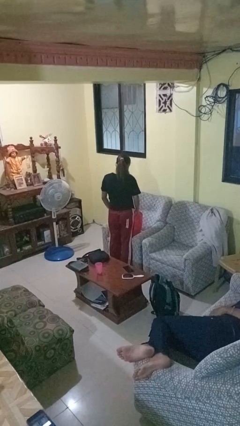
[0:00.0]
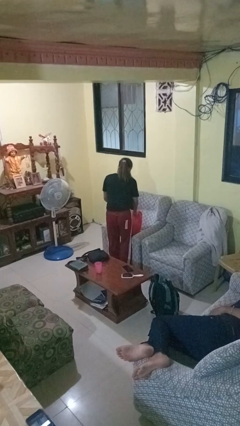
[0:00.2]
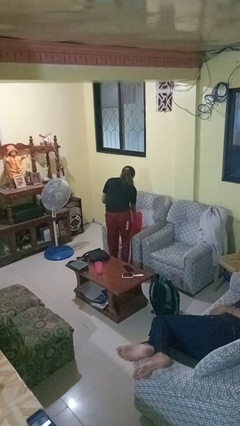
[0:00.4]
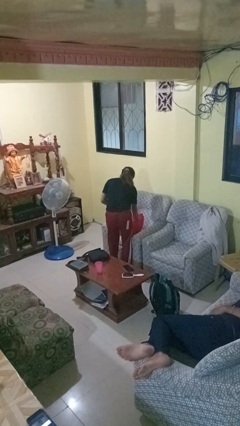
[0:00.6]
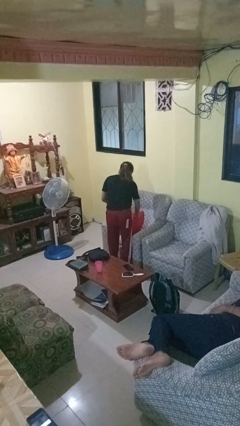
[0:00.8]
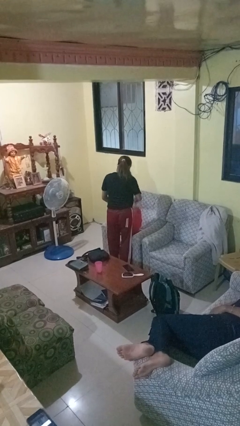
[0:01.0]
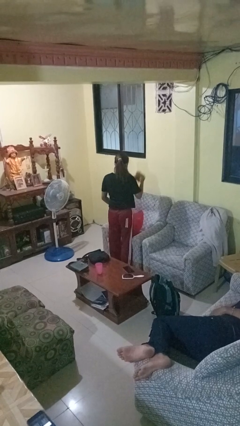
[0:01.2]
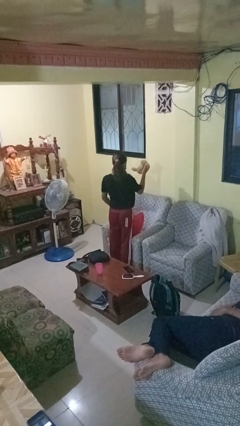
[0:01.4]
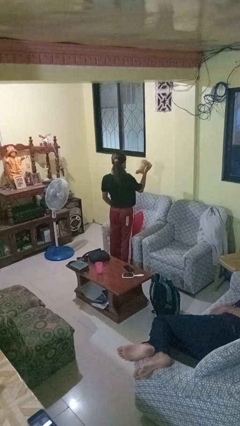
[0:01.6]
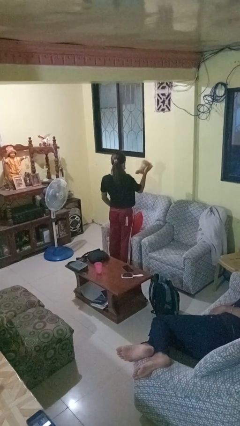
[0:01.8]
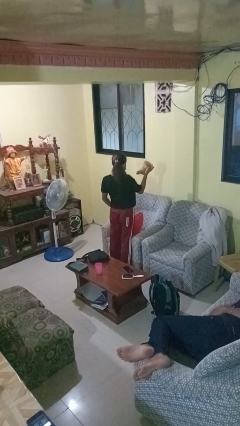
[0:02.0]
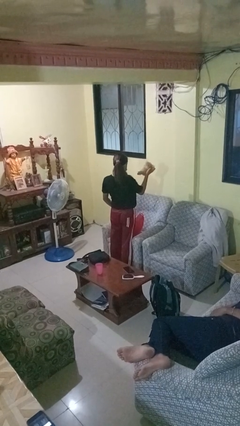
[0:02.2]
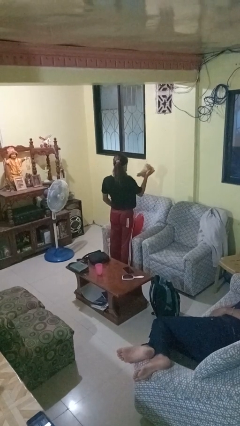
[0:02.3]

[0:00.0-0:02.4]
person takes object from bag

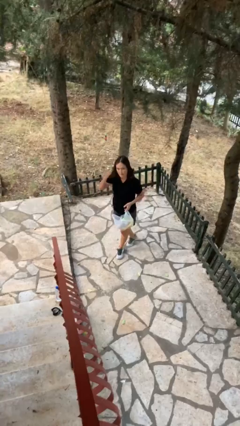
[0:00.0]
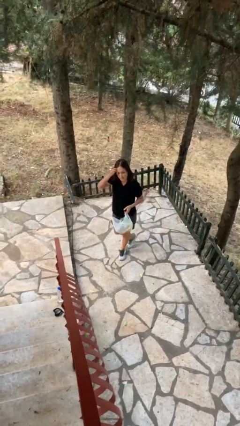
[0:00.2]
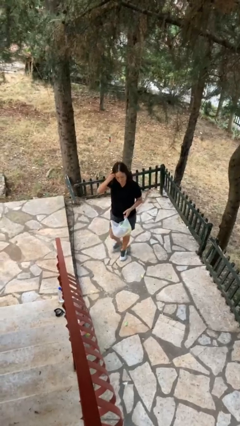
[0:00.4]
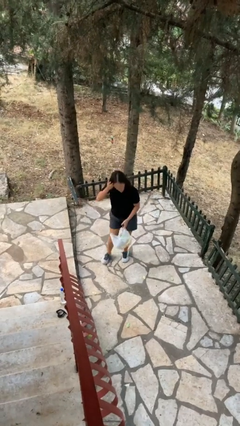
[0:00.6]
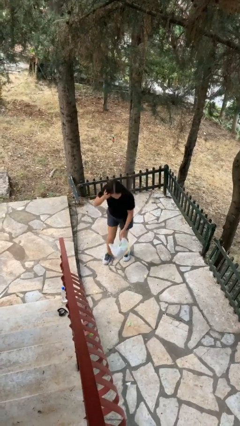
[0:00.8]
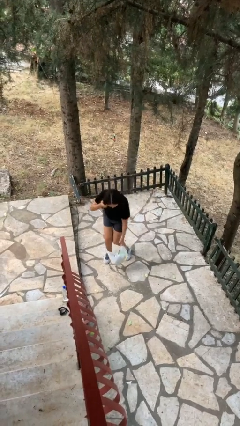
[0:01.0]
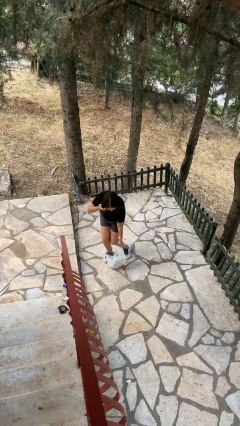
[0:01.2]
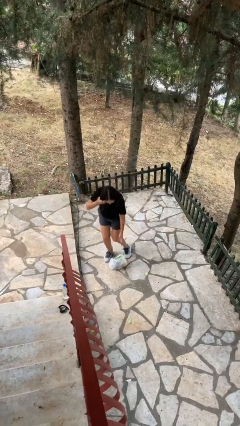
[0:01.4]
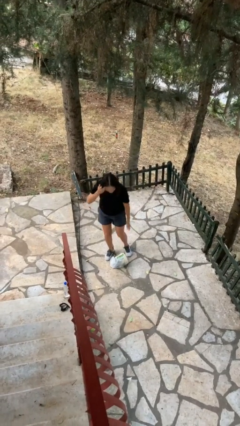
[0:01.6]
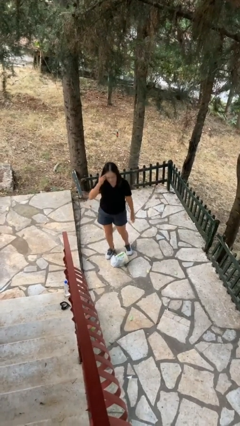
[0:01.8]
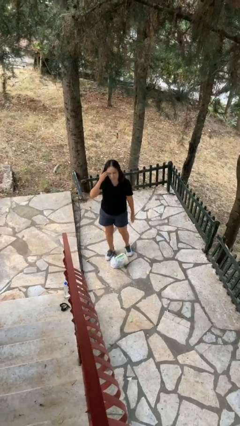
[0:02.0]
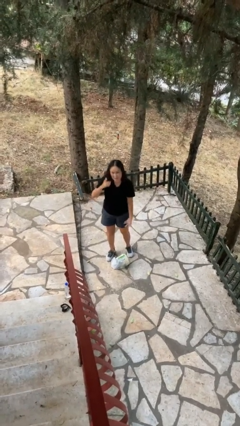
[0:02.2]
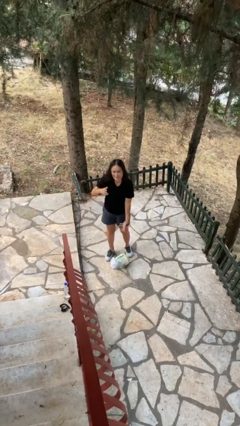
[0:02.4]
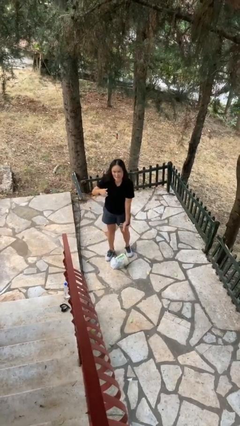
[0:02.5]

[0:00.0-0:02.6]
person drops object

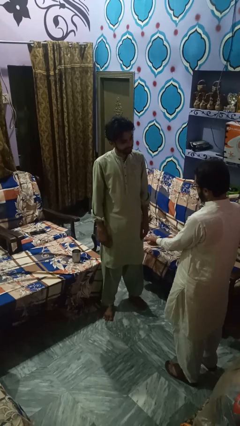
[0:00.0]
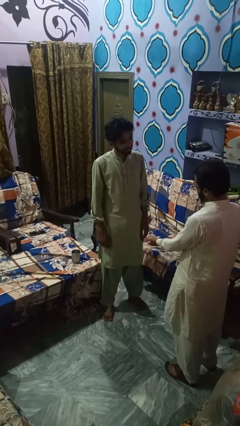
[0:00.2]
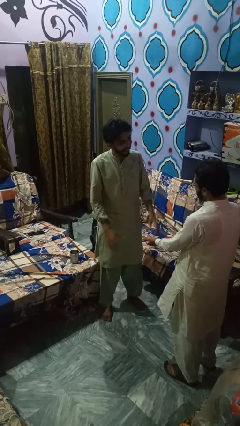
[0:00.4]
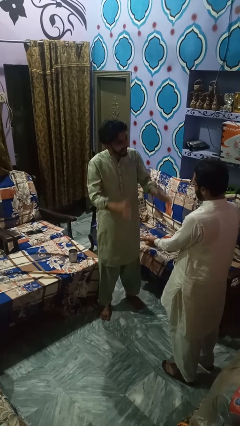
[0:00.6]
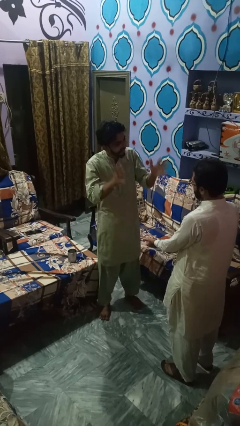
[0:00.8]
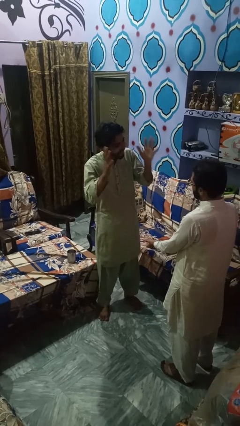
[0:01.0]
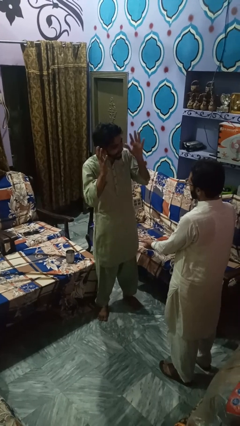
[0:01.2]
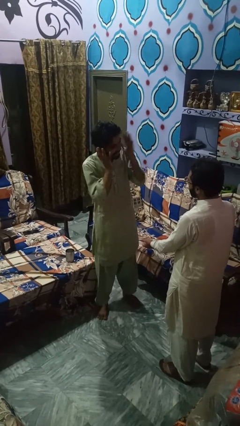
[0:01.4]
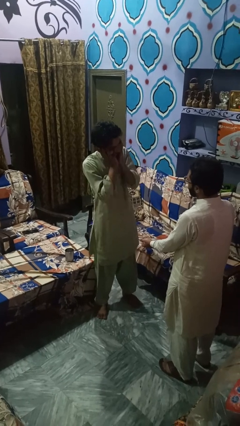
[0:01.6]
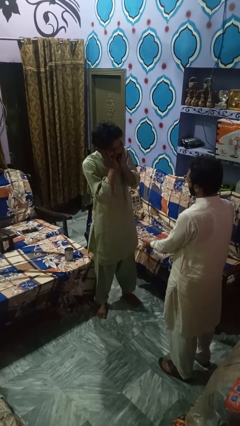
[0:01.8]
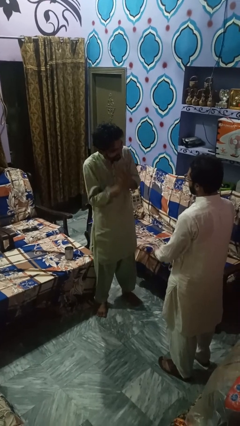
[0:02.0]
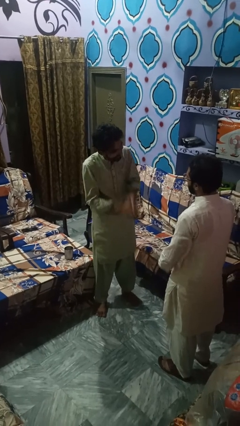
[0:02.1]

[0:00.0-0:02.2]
person laughs with person

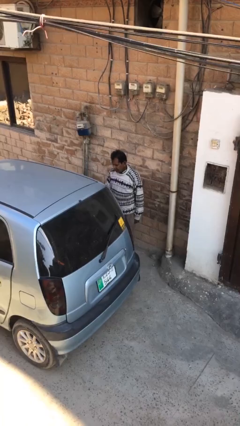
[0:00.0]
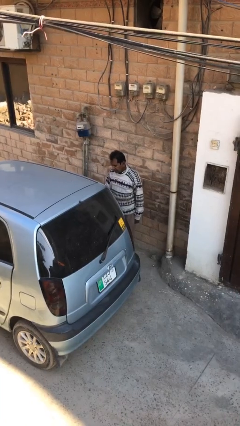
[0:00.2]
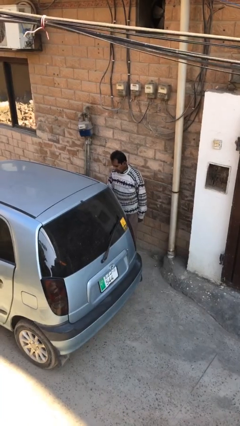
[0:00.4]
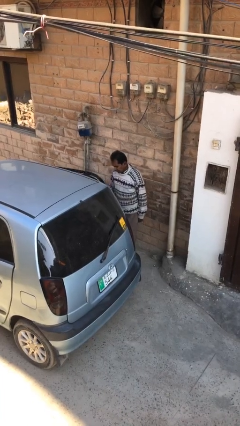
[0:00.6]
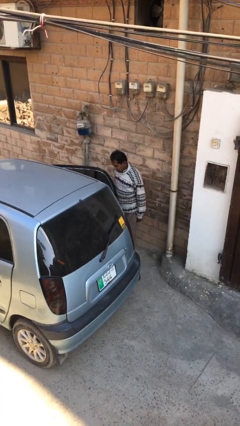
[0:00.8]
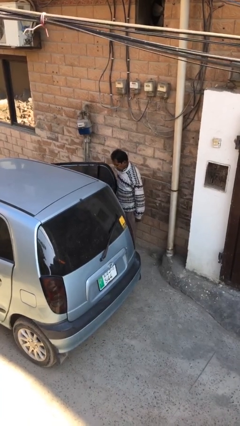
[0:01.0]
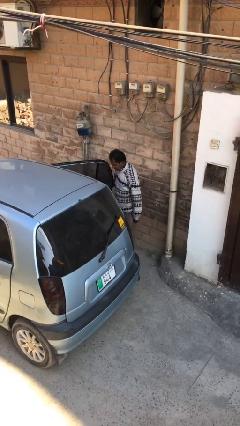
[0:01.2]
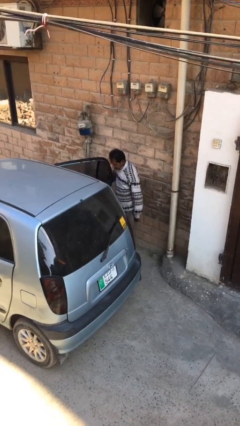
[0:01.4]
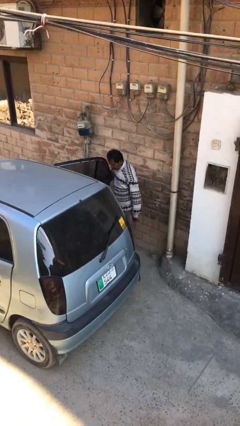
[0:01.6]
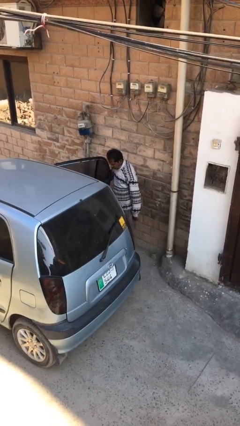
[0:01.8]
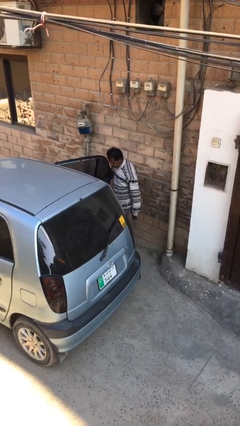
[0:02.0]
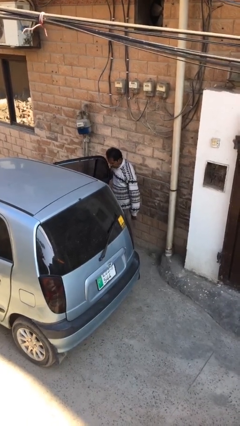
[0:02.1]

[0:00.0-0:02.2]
person opens car door

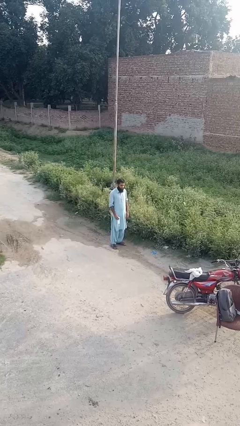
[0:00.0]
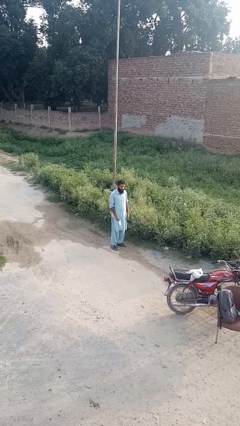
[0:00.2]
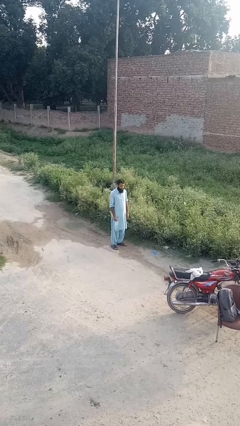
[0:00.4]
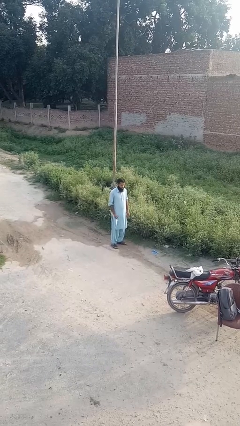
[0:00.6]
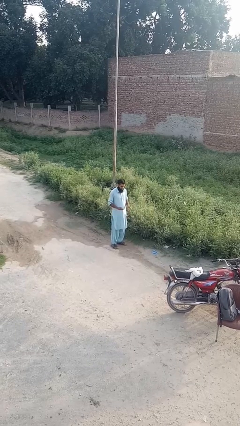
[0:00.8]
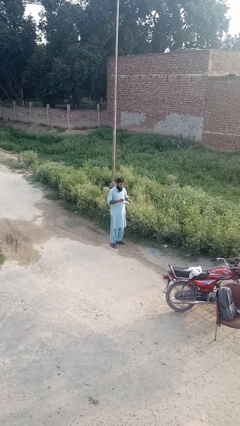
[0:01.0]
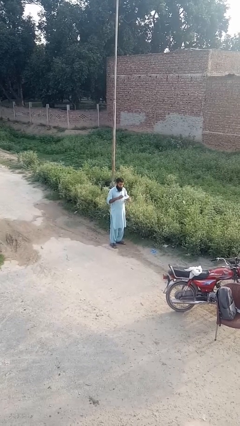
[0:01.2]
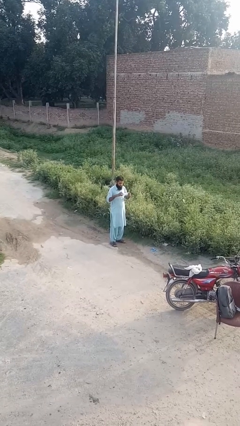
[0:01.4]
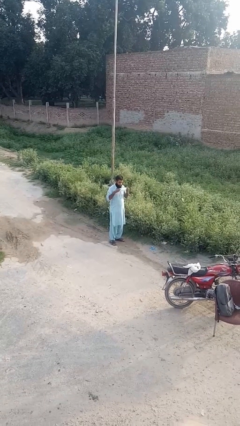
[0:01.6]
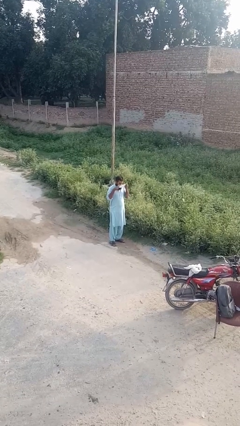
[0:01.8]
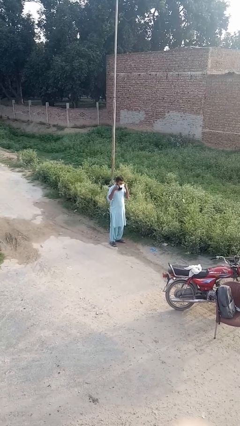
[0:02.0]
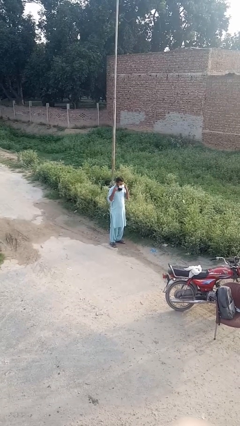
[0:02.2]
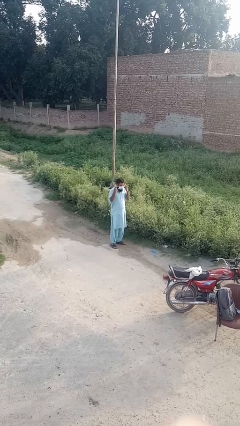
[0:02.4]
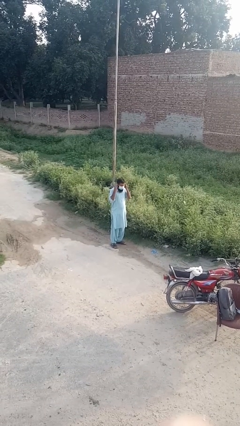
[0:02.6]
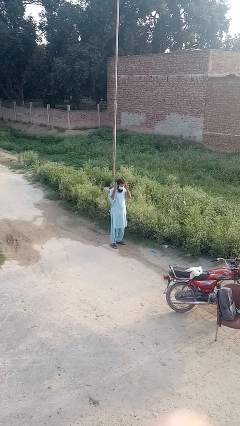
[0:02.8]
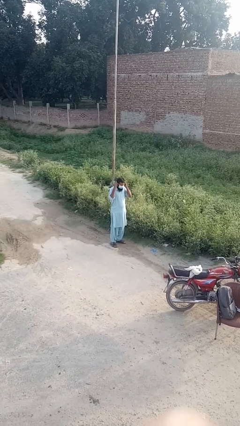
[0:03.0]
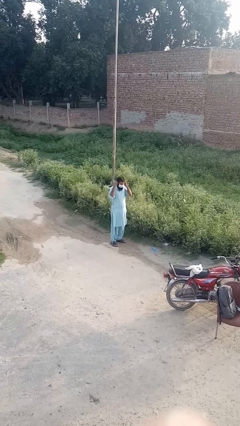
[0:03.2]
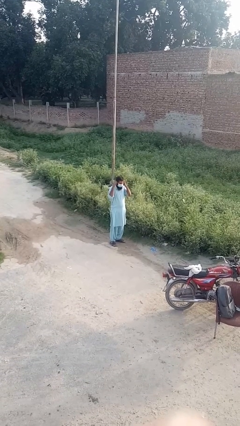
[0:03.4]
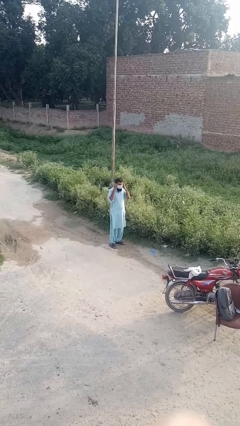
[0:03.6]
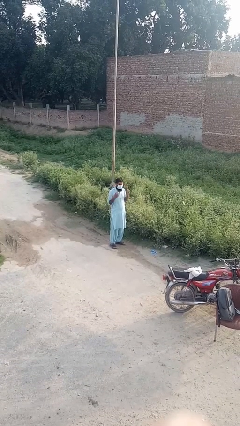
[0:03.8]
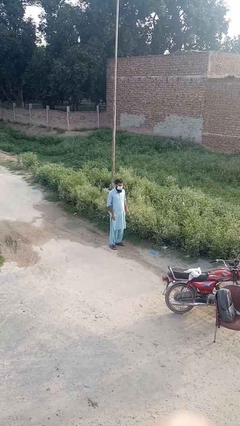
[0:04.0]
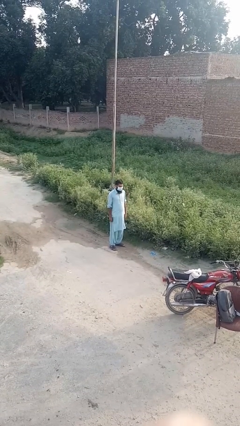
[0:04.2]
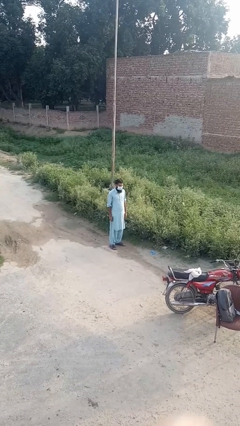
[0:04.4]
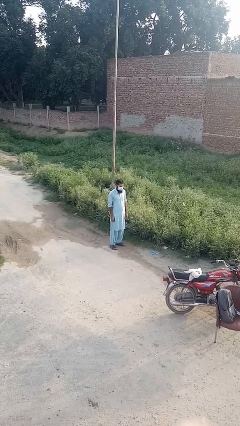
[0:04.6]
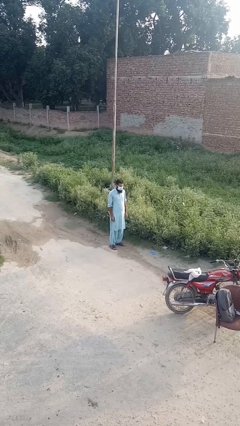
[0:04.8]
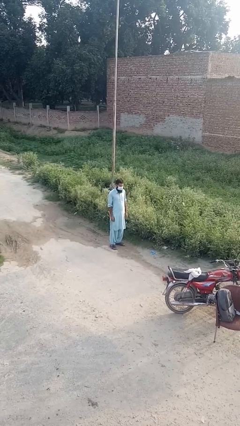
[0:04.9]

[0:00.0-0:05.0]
person puts on facemask

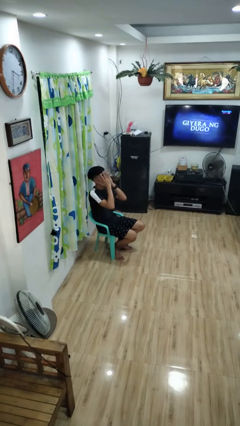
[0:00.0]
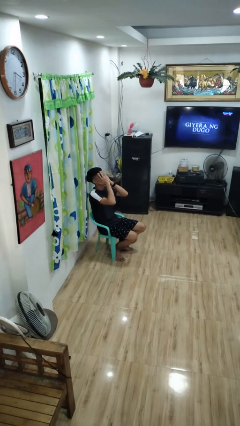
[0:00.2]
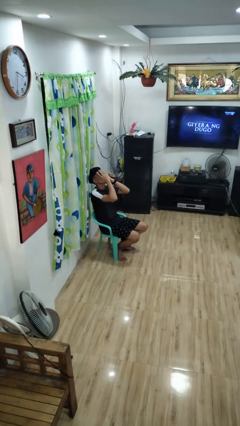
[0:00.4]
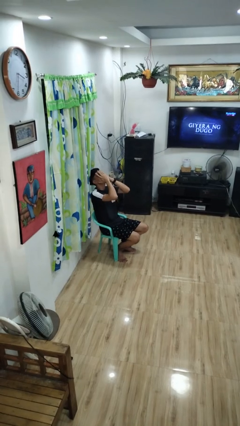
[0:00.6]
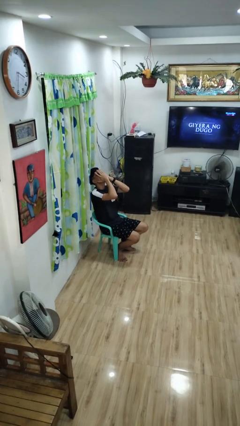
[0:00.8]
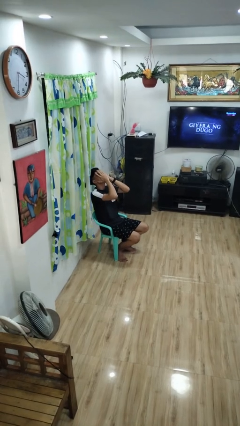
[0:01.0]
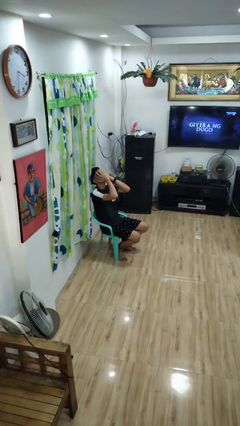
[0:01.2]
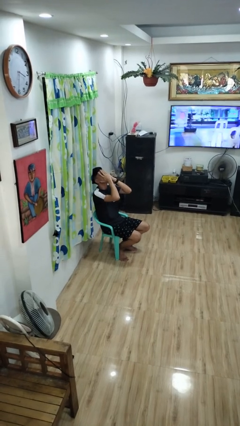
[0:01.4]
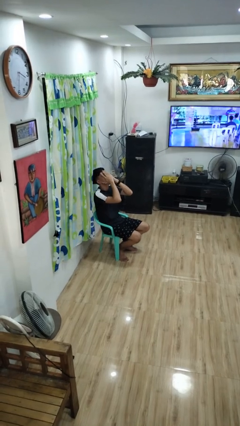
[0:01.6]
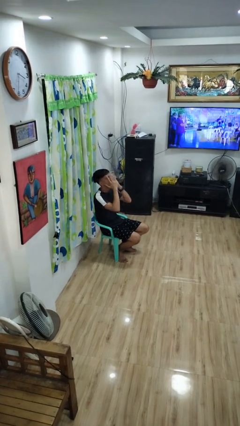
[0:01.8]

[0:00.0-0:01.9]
person covers face with hands

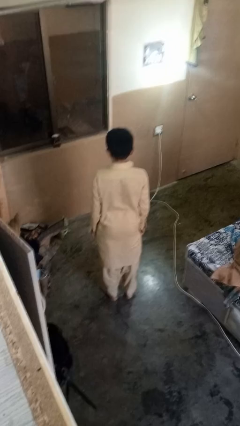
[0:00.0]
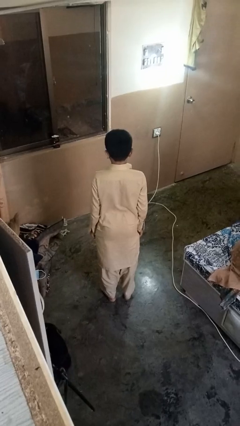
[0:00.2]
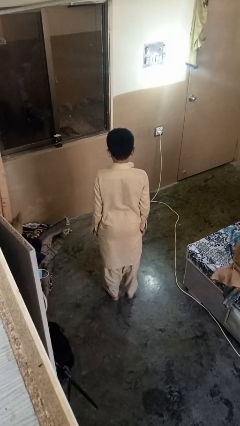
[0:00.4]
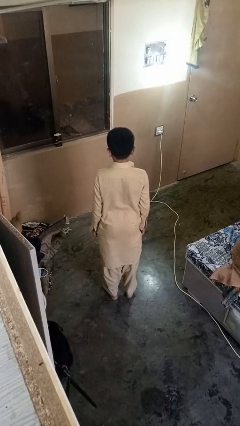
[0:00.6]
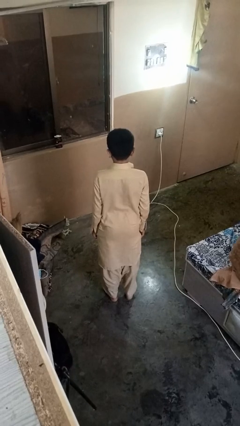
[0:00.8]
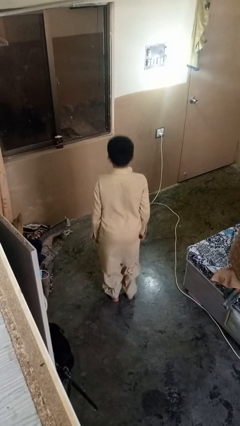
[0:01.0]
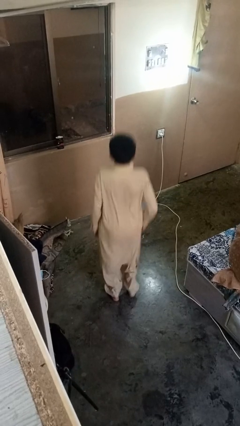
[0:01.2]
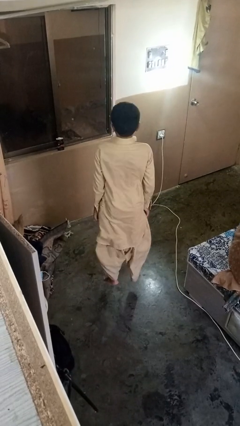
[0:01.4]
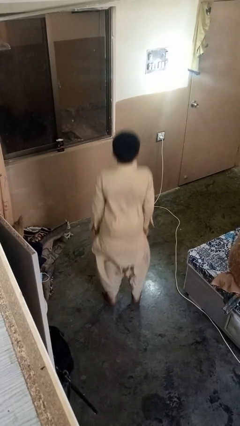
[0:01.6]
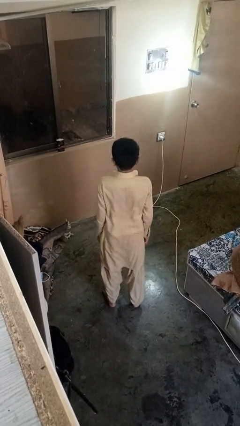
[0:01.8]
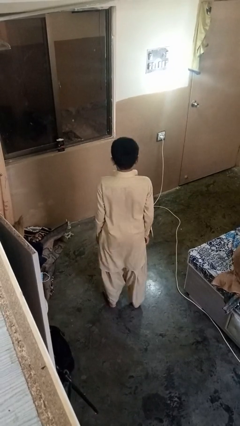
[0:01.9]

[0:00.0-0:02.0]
person jumps
